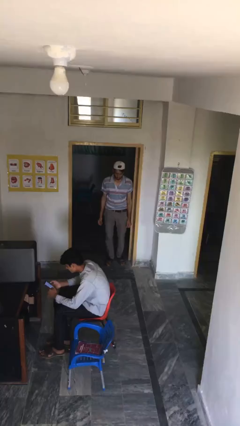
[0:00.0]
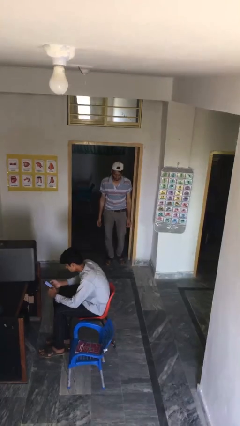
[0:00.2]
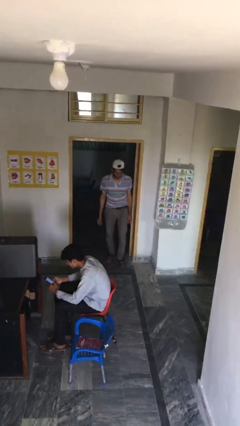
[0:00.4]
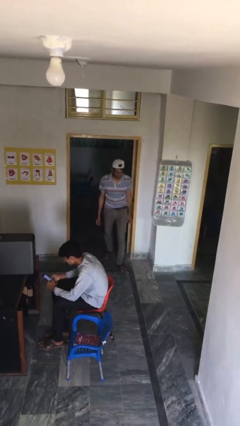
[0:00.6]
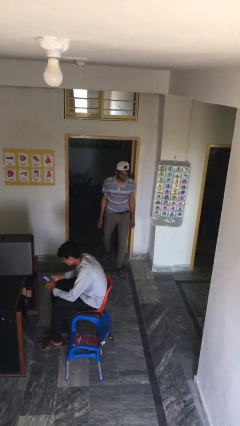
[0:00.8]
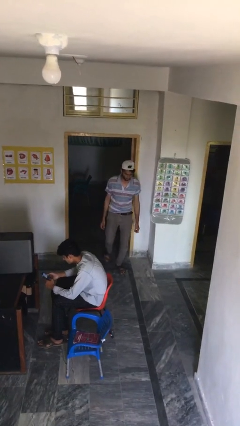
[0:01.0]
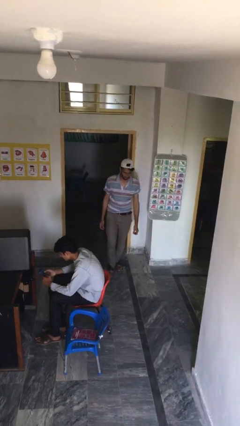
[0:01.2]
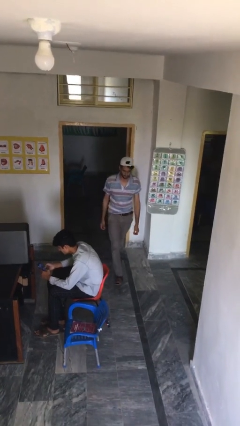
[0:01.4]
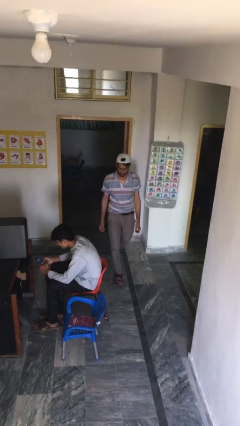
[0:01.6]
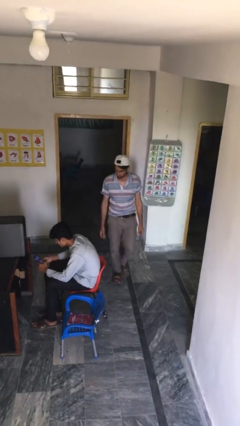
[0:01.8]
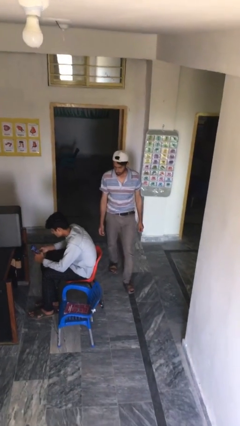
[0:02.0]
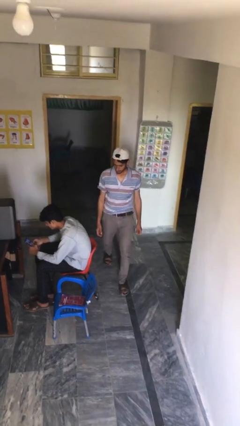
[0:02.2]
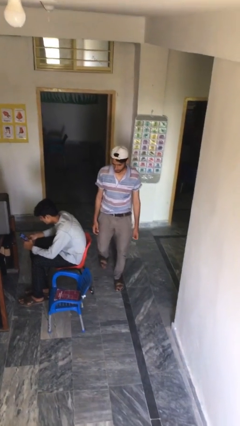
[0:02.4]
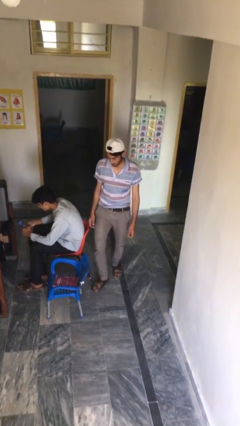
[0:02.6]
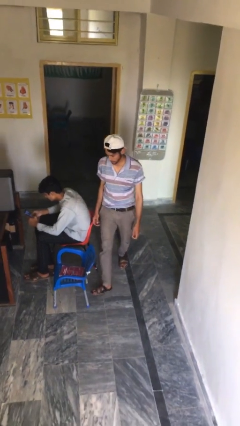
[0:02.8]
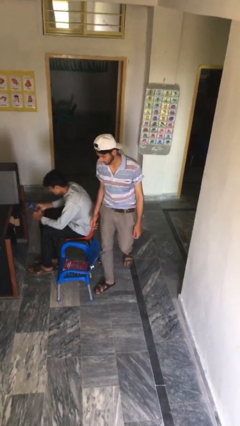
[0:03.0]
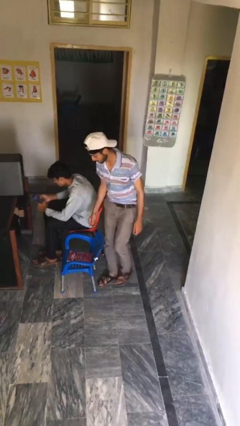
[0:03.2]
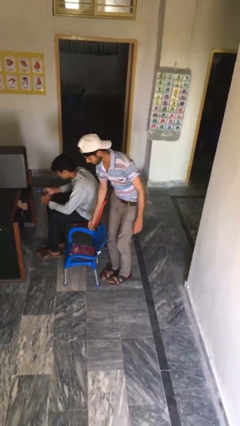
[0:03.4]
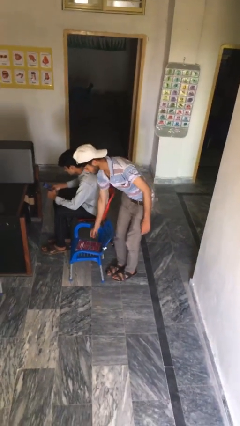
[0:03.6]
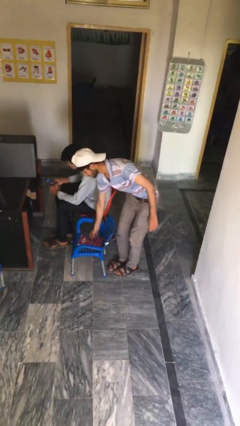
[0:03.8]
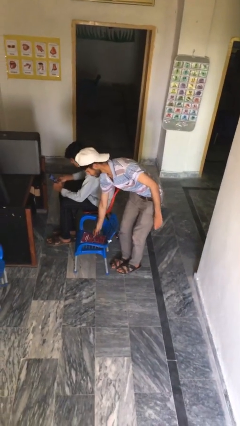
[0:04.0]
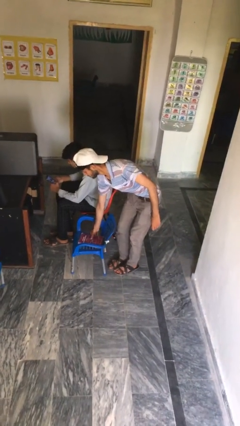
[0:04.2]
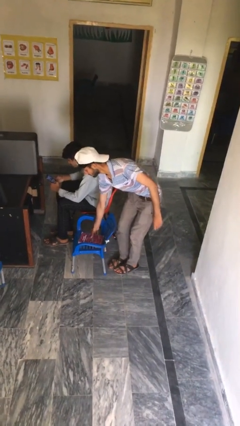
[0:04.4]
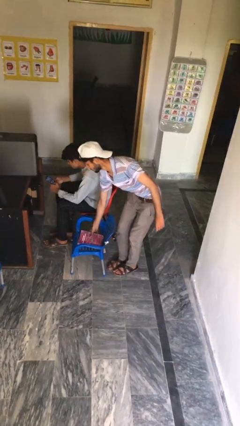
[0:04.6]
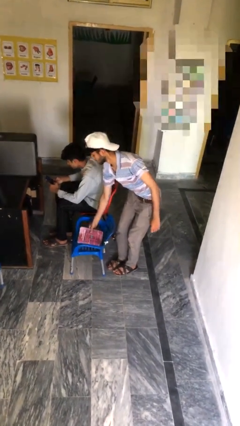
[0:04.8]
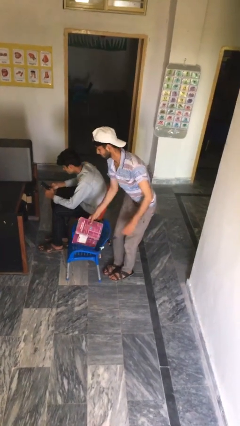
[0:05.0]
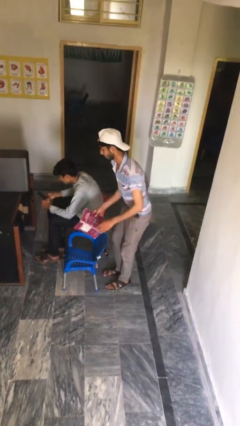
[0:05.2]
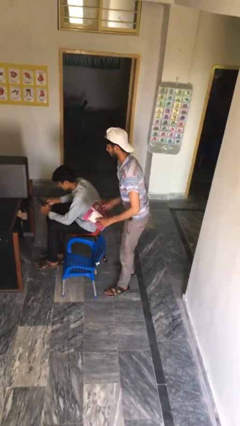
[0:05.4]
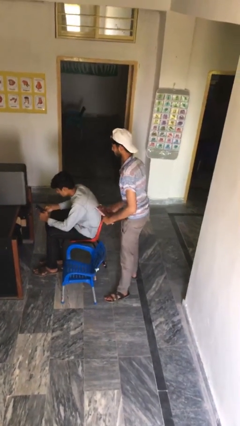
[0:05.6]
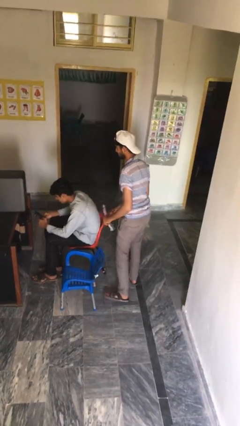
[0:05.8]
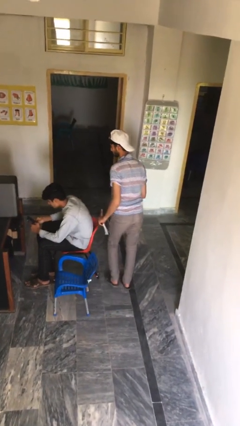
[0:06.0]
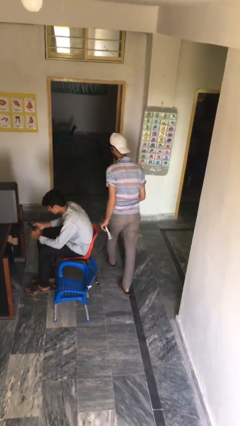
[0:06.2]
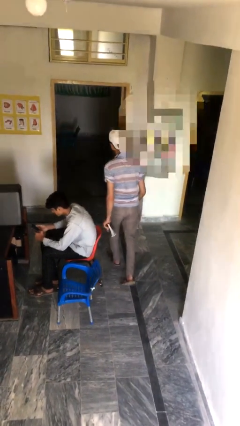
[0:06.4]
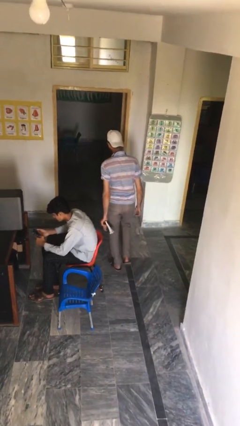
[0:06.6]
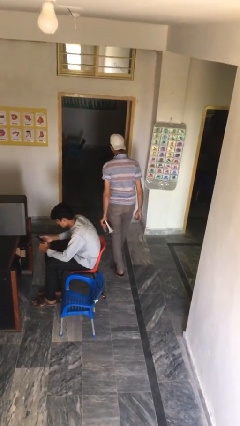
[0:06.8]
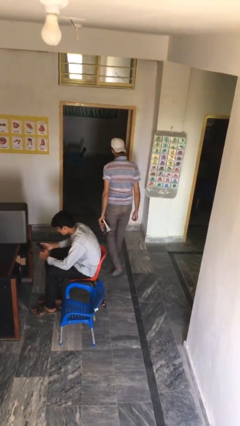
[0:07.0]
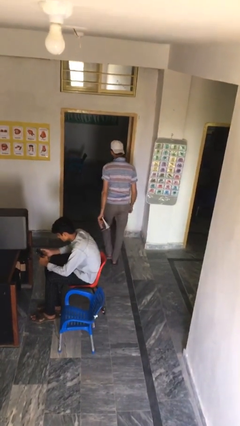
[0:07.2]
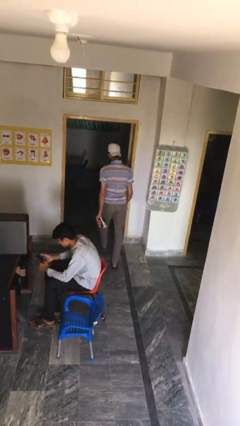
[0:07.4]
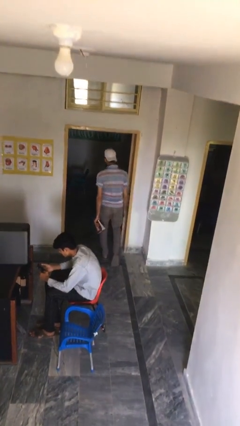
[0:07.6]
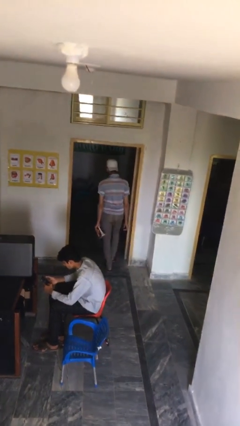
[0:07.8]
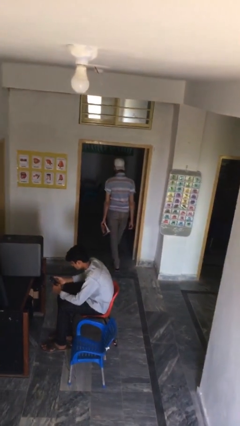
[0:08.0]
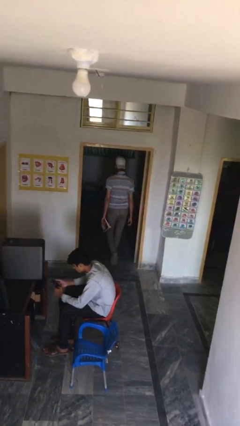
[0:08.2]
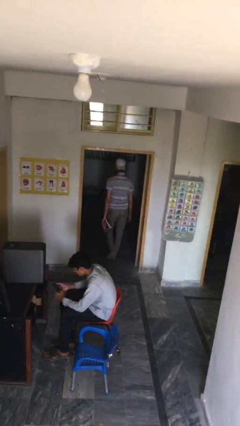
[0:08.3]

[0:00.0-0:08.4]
person steals object from person

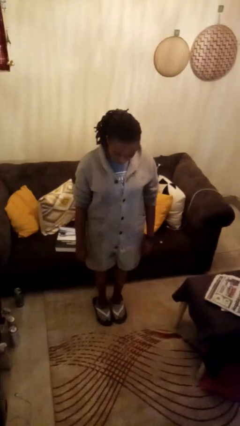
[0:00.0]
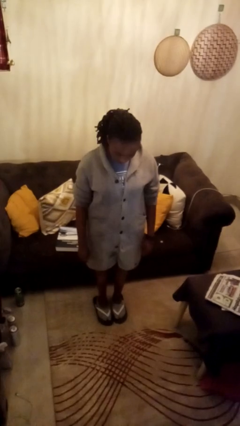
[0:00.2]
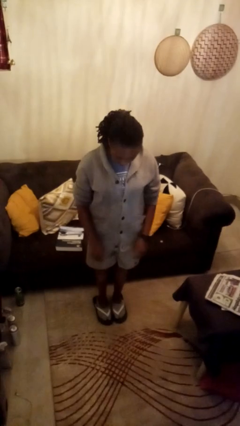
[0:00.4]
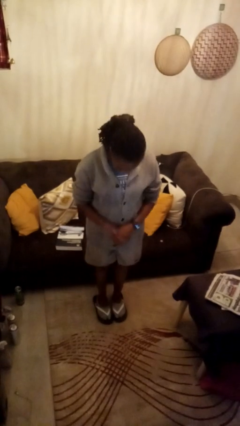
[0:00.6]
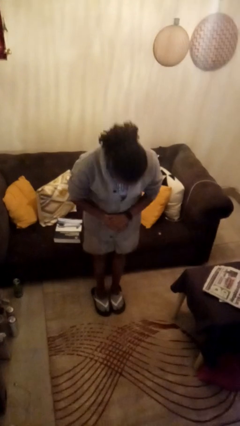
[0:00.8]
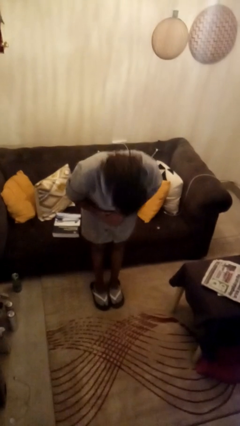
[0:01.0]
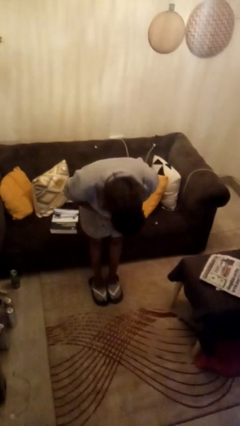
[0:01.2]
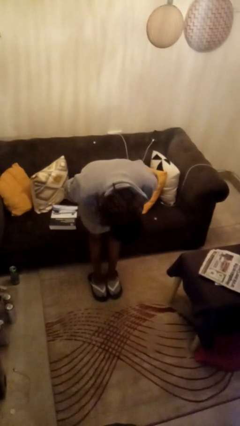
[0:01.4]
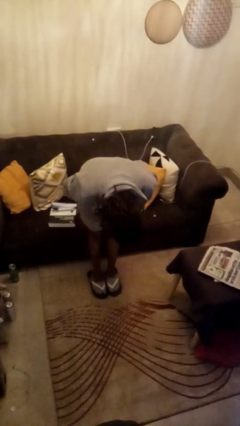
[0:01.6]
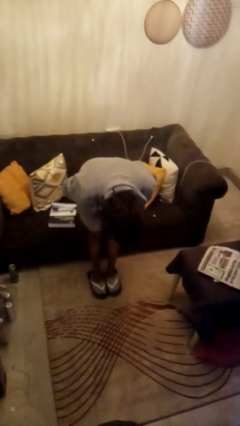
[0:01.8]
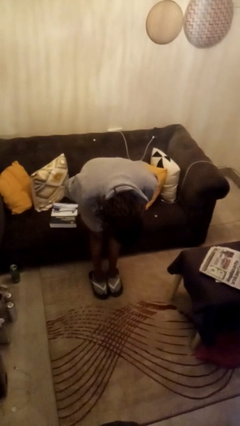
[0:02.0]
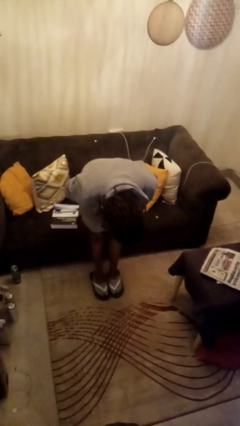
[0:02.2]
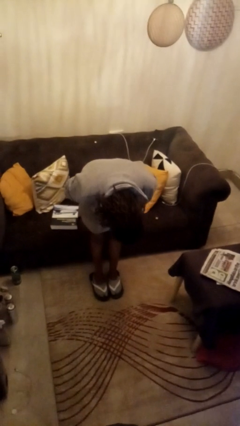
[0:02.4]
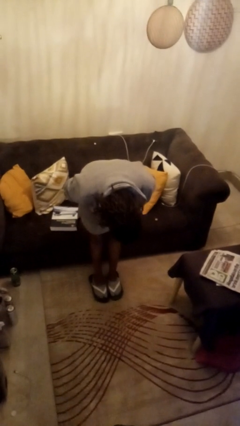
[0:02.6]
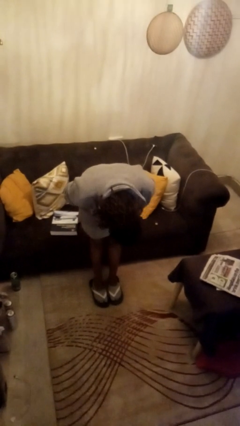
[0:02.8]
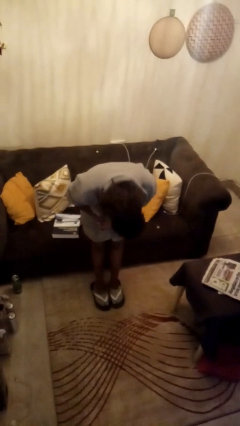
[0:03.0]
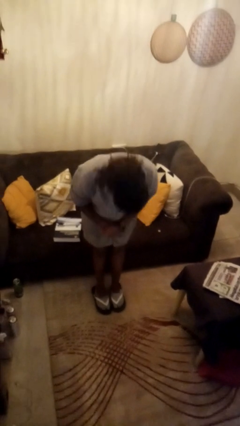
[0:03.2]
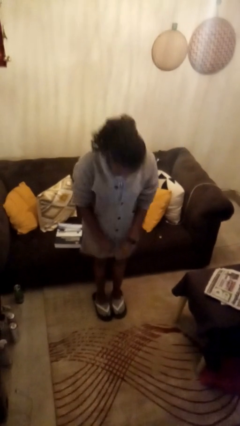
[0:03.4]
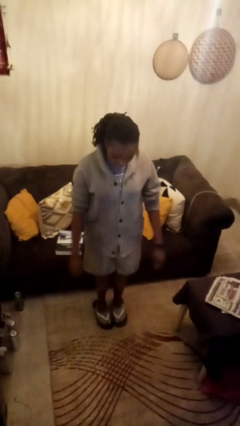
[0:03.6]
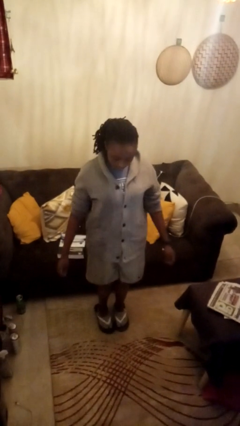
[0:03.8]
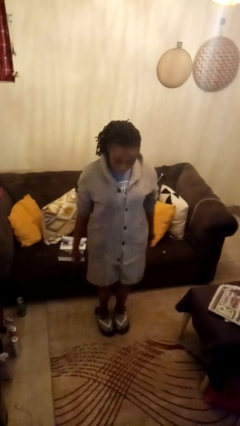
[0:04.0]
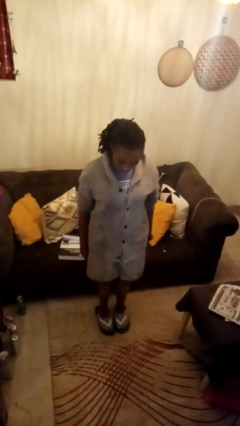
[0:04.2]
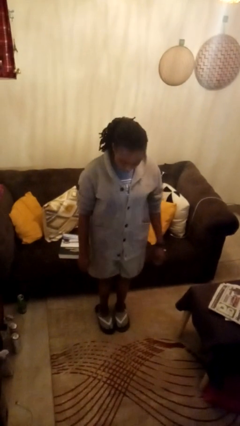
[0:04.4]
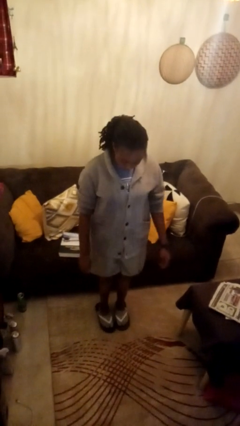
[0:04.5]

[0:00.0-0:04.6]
person bows

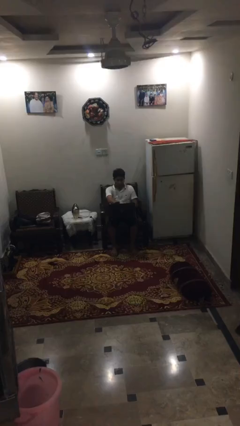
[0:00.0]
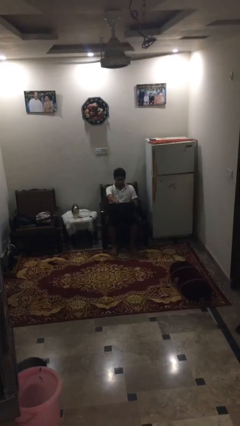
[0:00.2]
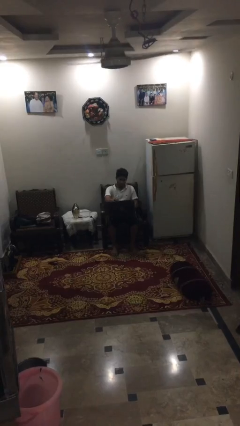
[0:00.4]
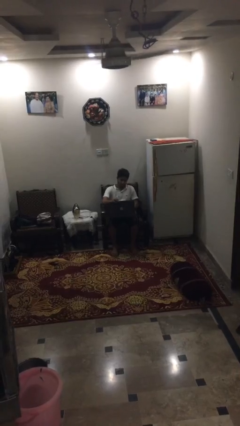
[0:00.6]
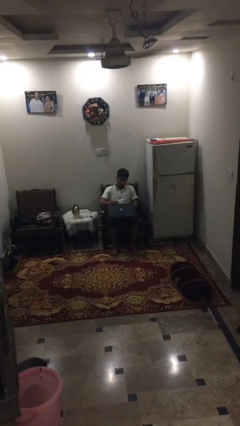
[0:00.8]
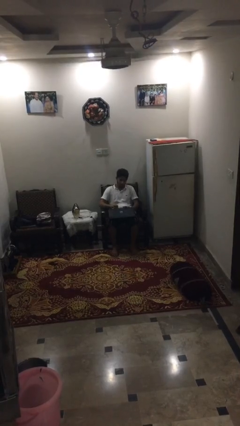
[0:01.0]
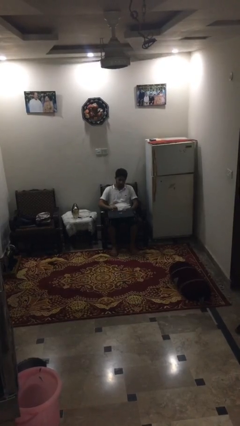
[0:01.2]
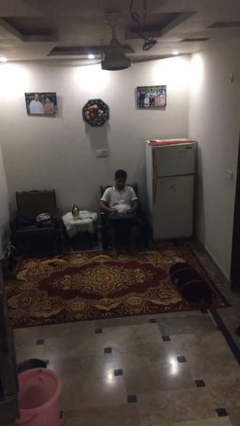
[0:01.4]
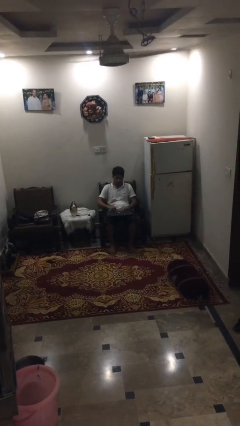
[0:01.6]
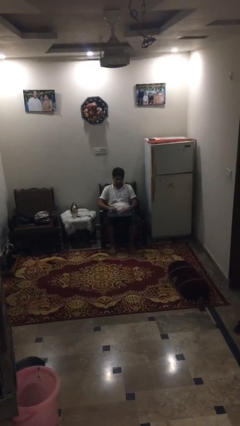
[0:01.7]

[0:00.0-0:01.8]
person closes laptop

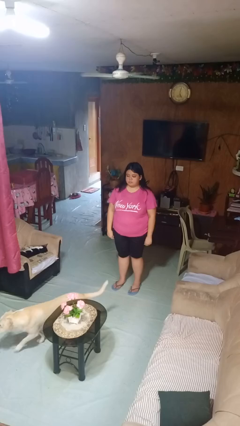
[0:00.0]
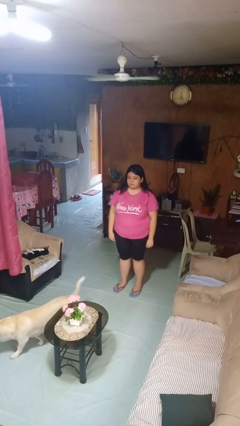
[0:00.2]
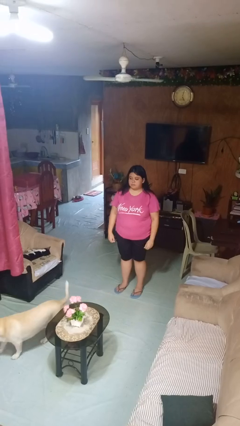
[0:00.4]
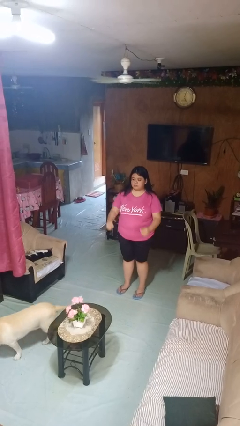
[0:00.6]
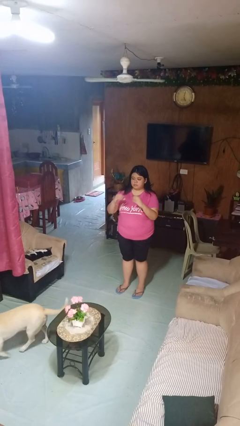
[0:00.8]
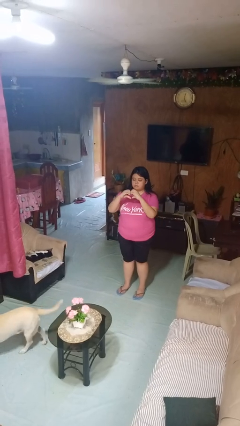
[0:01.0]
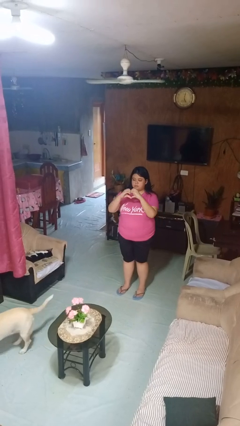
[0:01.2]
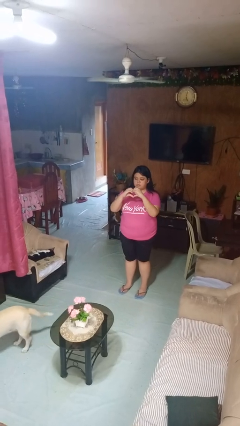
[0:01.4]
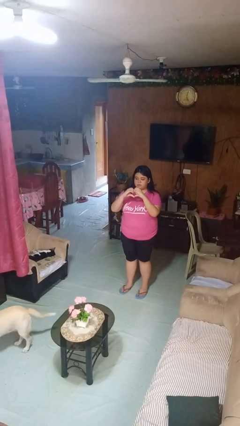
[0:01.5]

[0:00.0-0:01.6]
person gestures heart

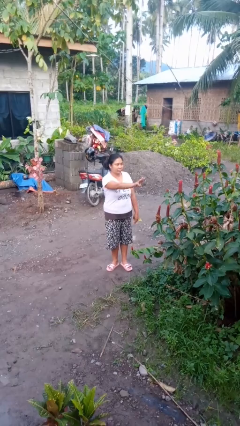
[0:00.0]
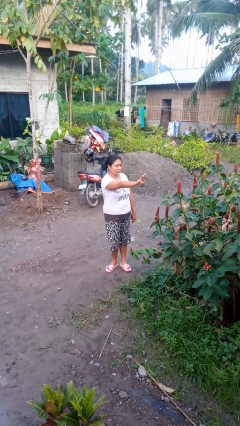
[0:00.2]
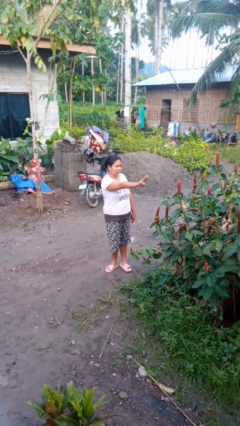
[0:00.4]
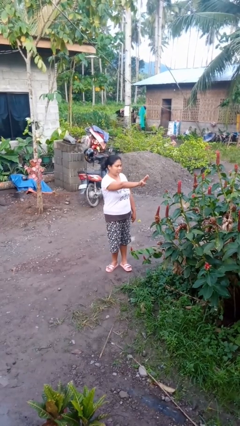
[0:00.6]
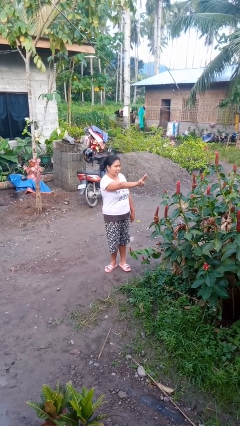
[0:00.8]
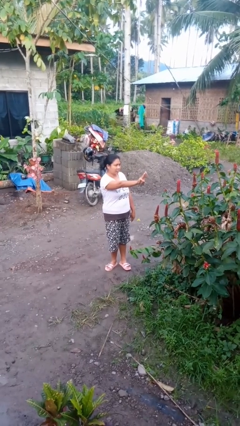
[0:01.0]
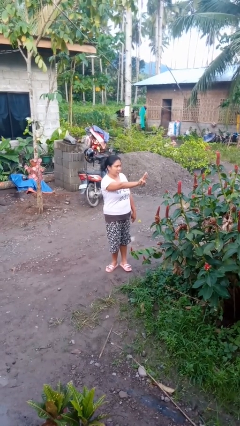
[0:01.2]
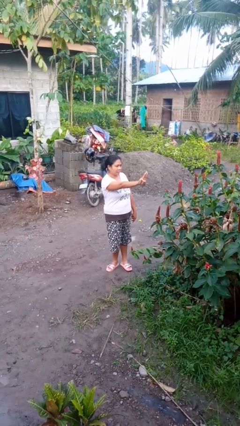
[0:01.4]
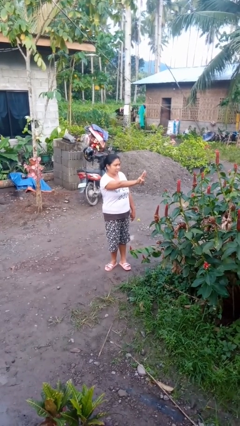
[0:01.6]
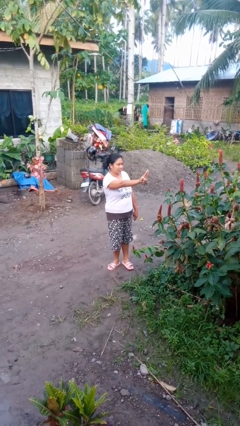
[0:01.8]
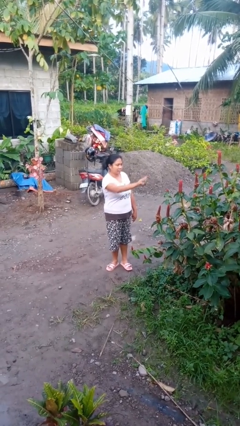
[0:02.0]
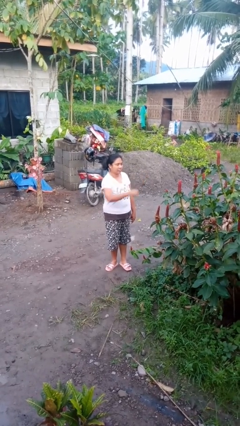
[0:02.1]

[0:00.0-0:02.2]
person gestures number three
